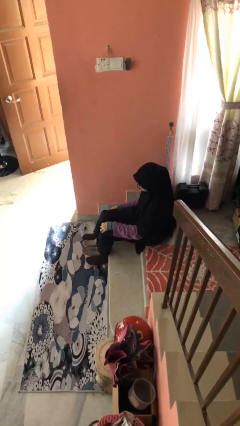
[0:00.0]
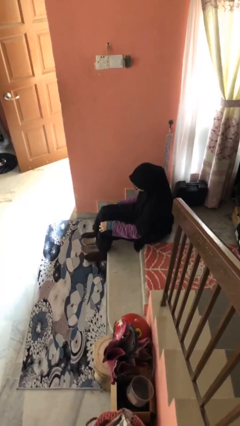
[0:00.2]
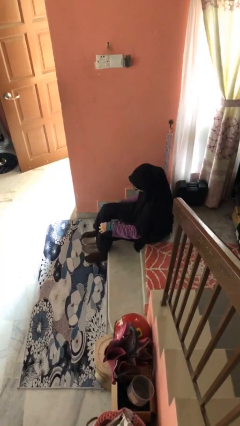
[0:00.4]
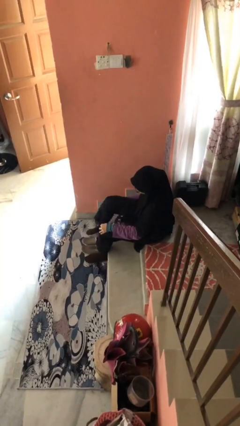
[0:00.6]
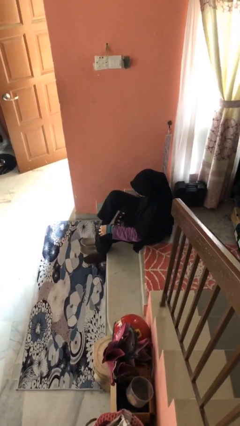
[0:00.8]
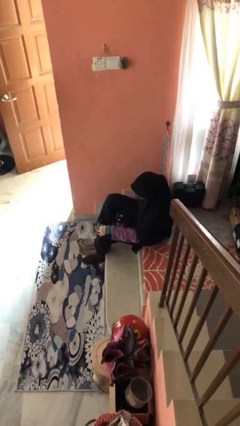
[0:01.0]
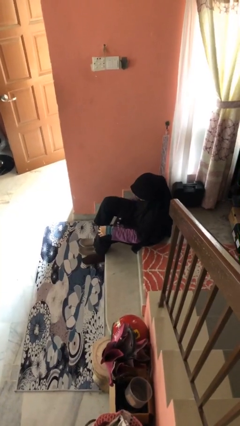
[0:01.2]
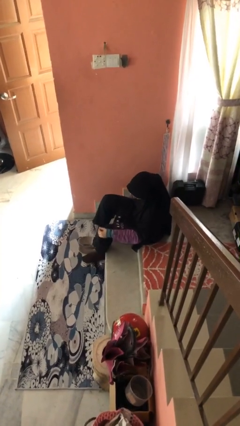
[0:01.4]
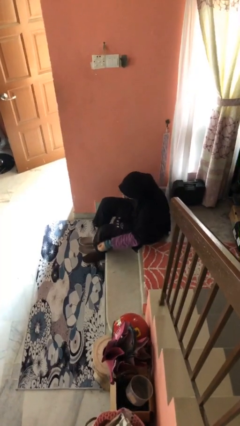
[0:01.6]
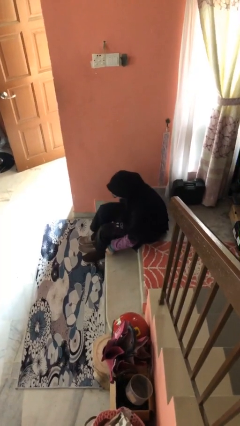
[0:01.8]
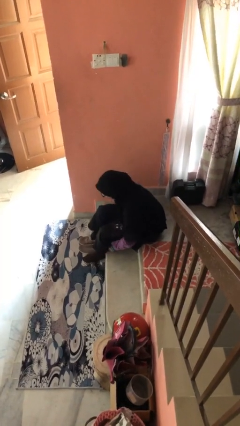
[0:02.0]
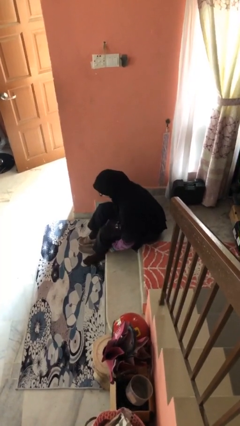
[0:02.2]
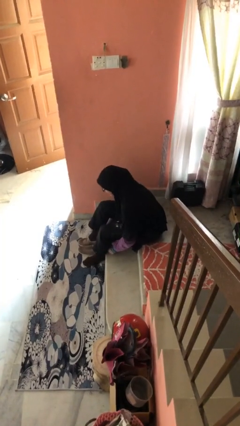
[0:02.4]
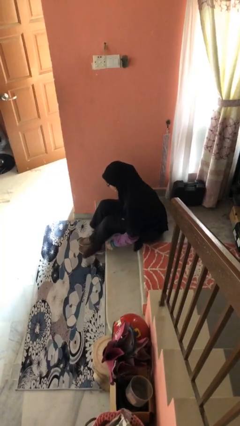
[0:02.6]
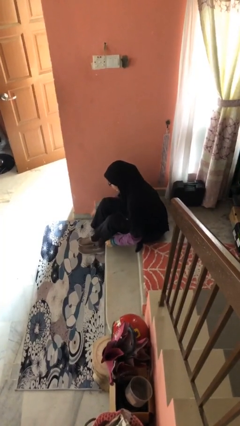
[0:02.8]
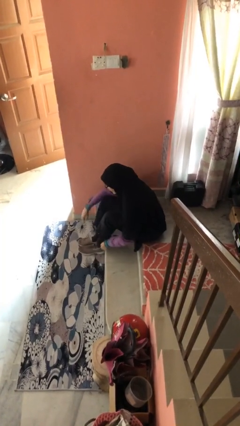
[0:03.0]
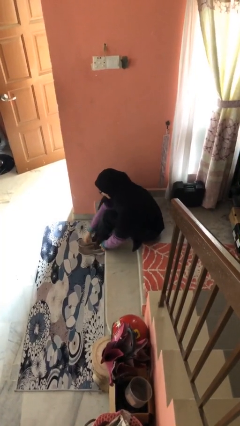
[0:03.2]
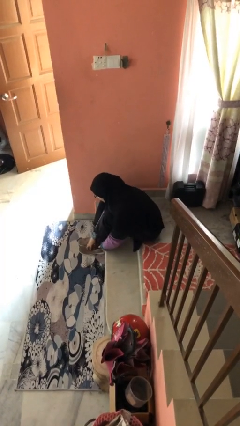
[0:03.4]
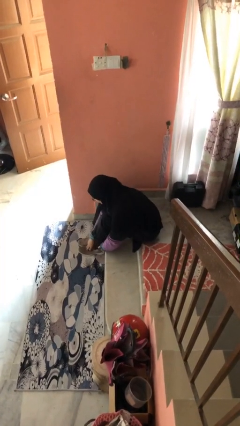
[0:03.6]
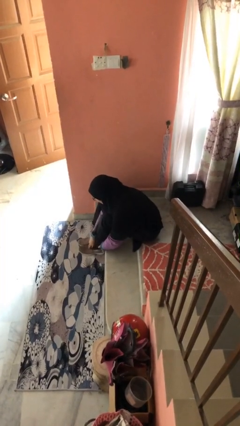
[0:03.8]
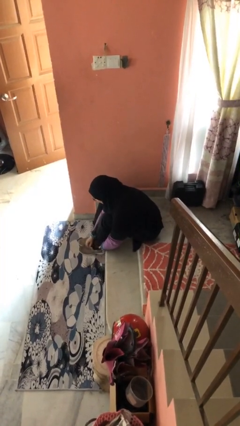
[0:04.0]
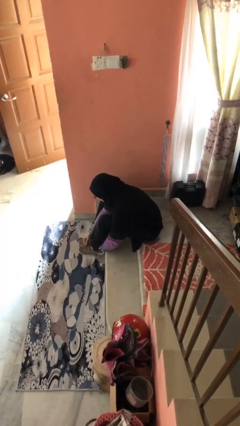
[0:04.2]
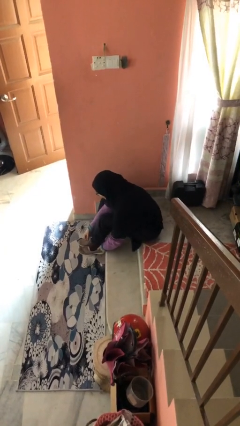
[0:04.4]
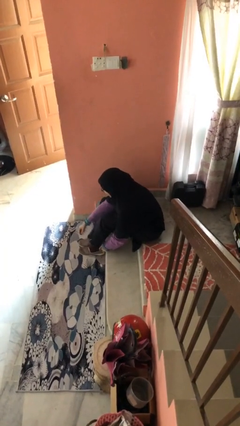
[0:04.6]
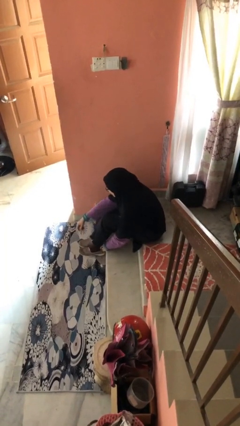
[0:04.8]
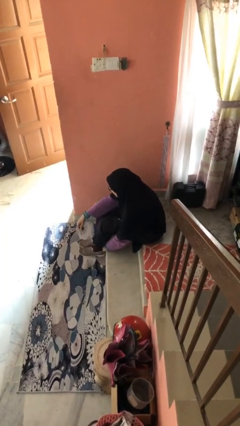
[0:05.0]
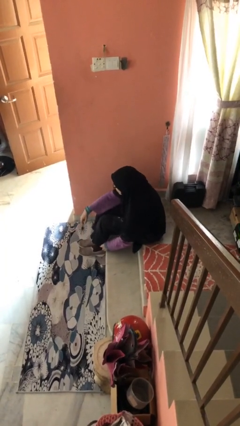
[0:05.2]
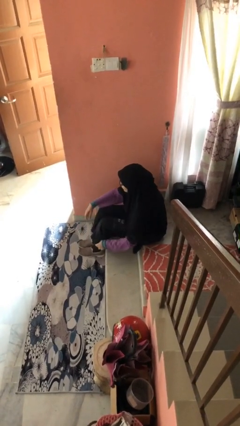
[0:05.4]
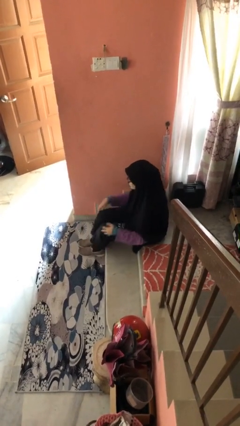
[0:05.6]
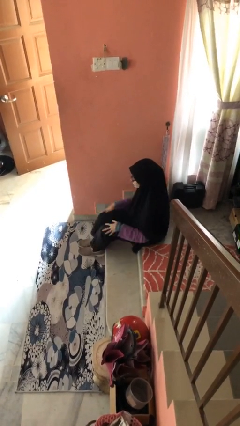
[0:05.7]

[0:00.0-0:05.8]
person puts on shoes

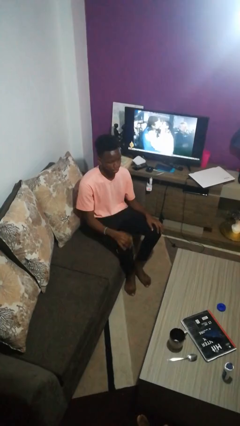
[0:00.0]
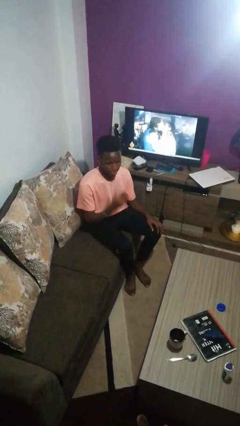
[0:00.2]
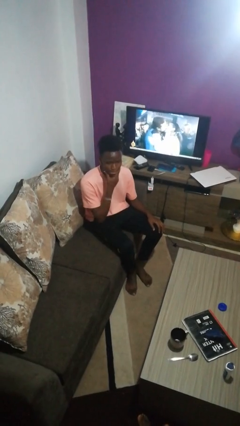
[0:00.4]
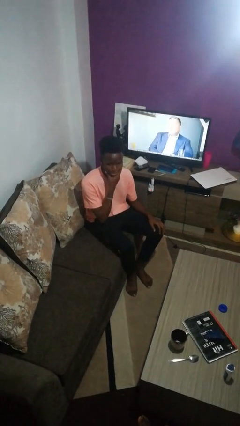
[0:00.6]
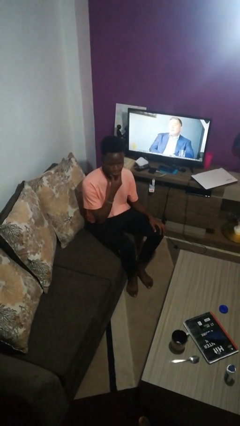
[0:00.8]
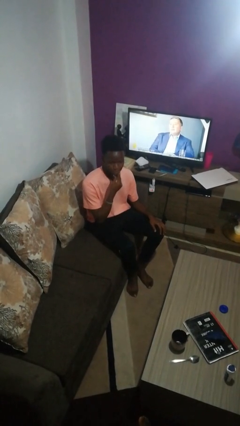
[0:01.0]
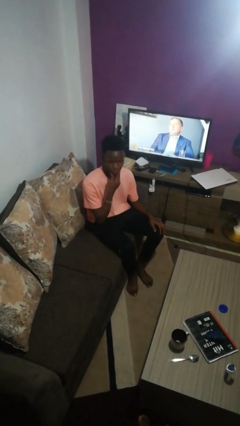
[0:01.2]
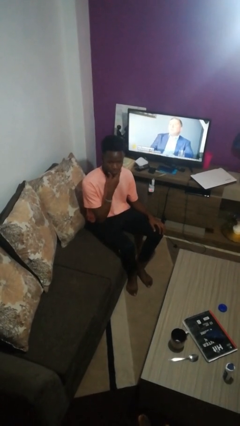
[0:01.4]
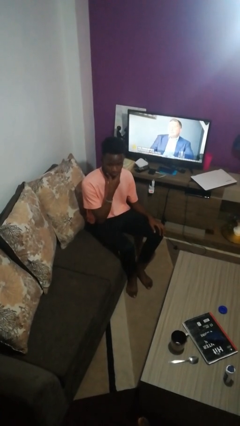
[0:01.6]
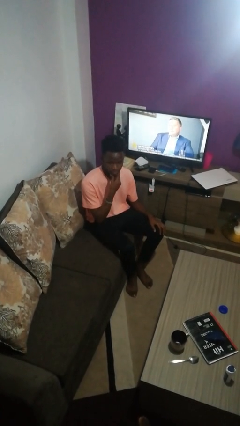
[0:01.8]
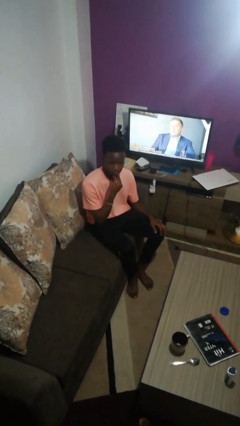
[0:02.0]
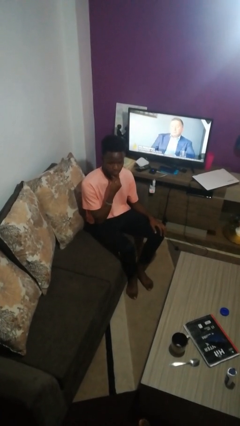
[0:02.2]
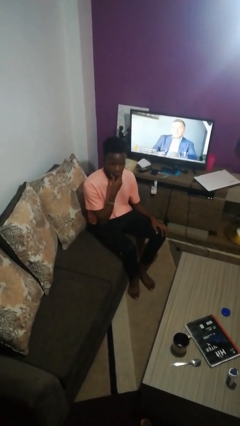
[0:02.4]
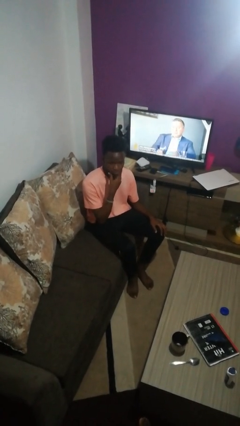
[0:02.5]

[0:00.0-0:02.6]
person strokes chin

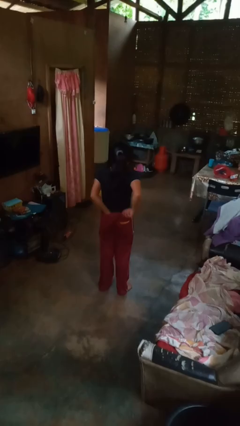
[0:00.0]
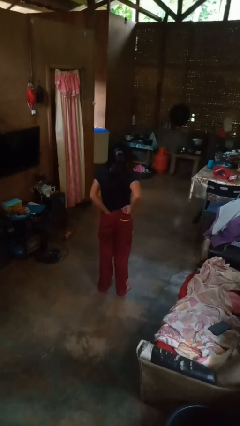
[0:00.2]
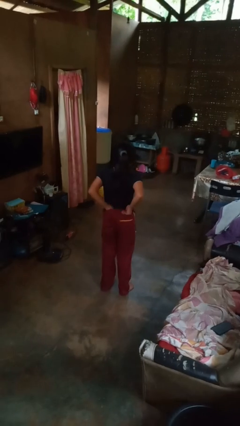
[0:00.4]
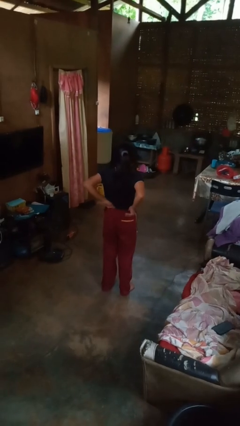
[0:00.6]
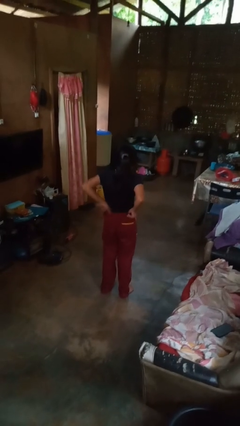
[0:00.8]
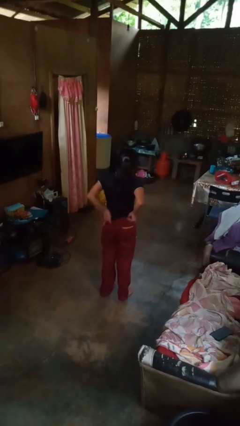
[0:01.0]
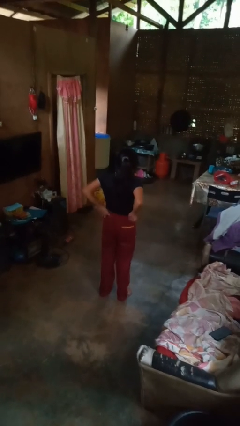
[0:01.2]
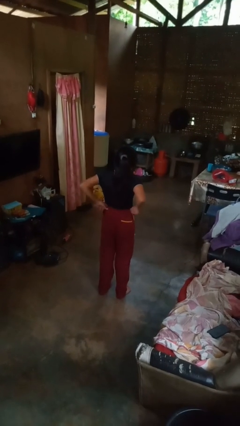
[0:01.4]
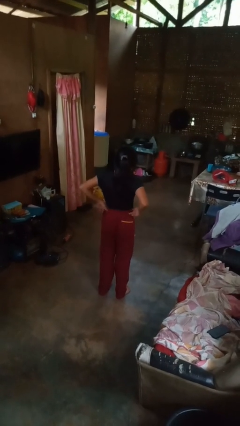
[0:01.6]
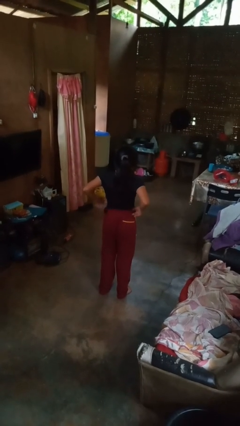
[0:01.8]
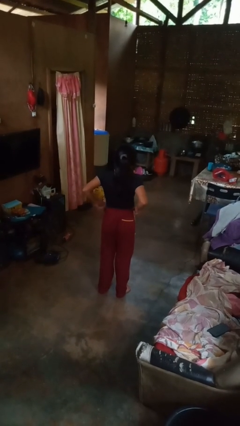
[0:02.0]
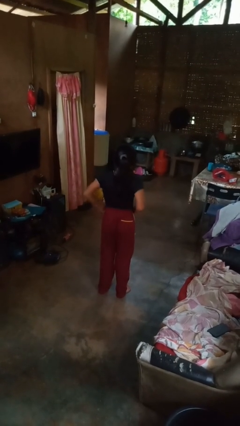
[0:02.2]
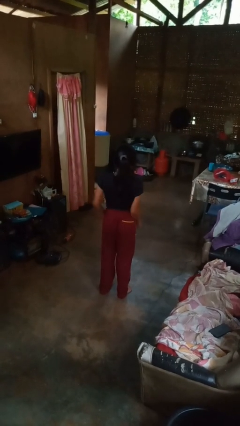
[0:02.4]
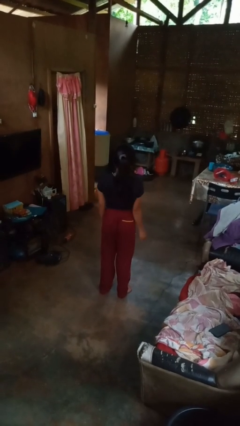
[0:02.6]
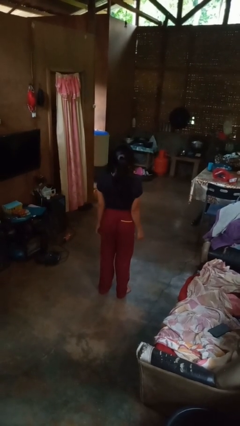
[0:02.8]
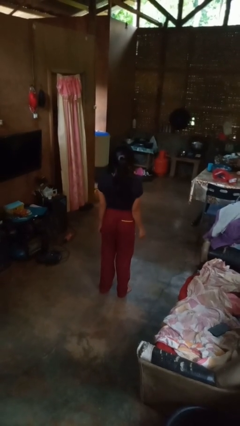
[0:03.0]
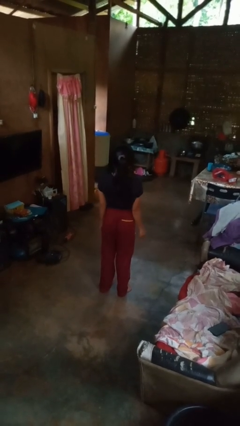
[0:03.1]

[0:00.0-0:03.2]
person tucks in shirt

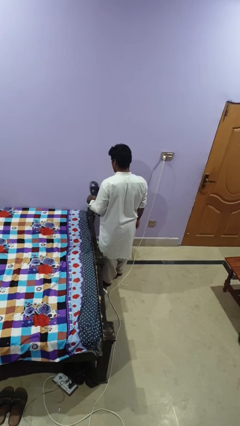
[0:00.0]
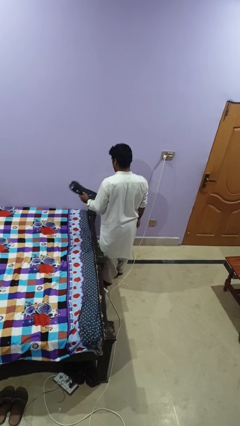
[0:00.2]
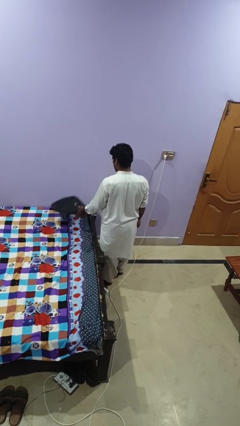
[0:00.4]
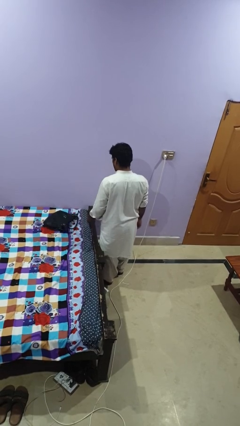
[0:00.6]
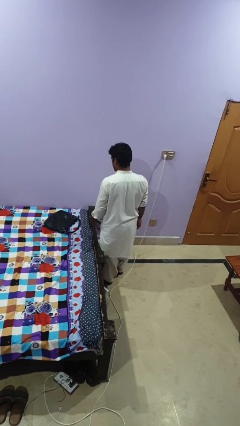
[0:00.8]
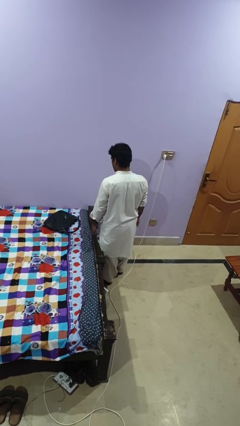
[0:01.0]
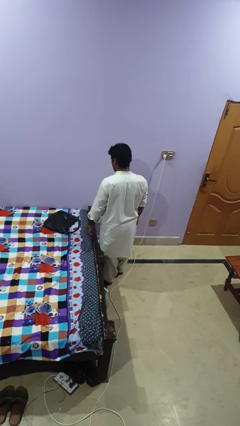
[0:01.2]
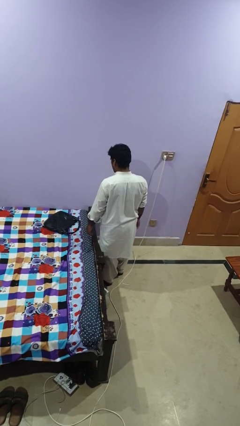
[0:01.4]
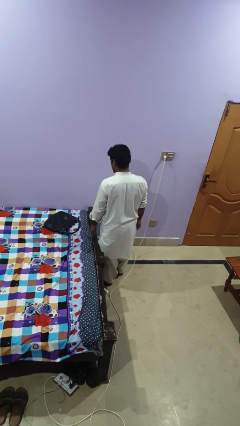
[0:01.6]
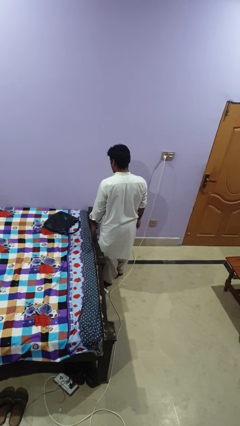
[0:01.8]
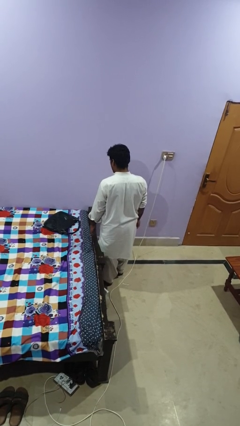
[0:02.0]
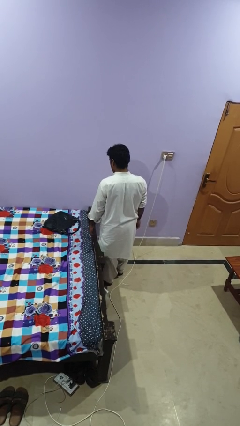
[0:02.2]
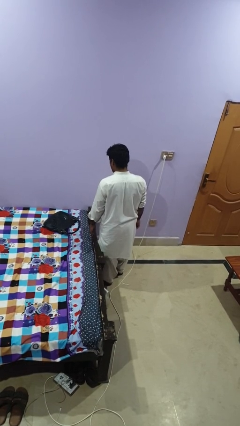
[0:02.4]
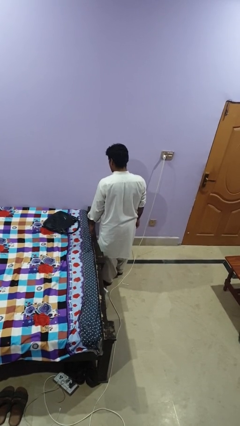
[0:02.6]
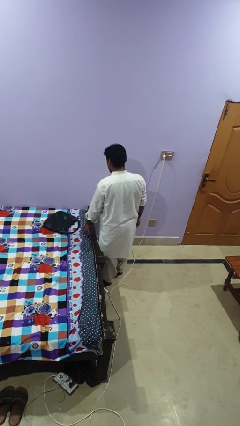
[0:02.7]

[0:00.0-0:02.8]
person throws object on bed

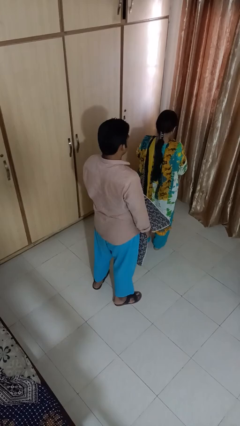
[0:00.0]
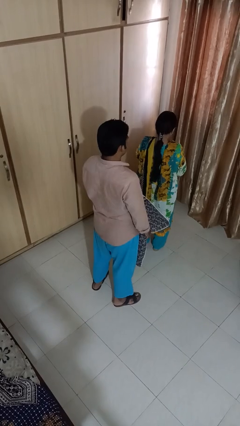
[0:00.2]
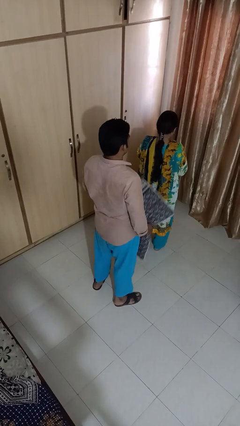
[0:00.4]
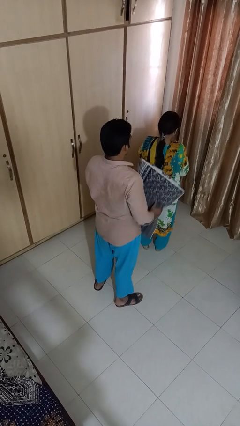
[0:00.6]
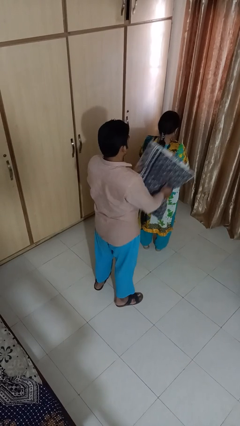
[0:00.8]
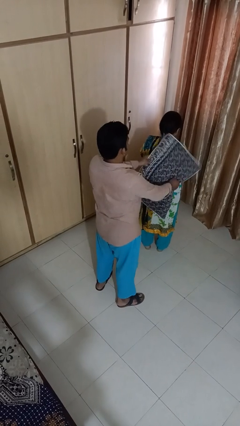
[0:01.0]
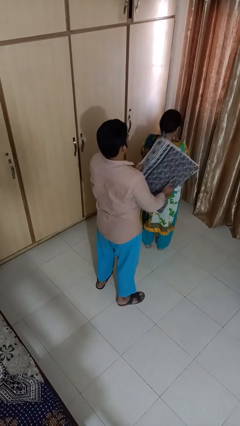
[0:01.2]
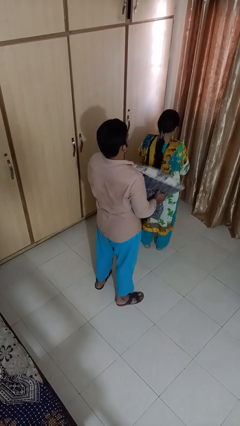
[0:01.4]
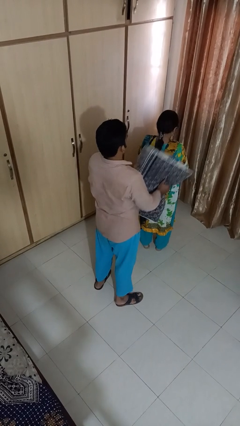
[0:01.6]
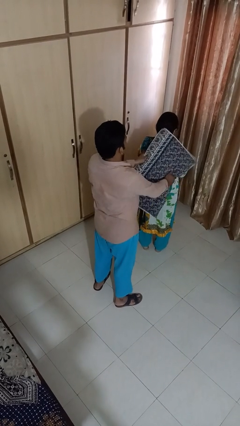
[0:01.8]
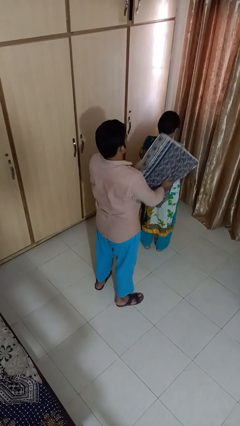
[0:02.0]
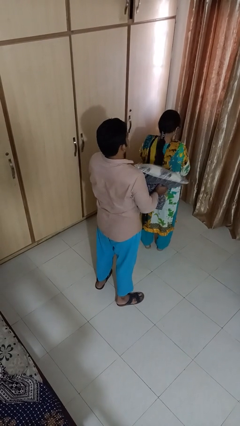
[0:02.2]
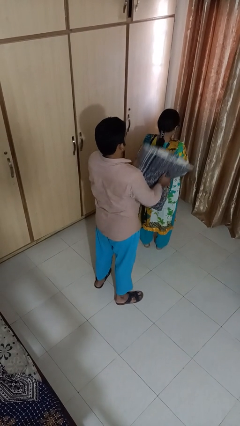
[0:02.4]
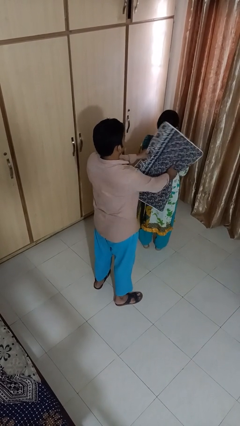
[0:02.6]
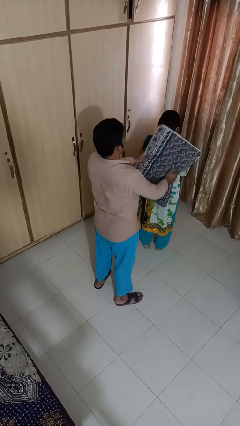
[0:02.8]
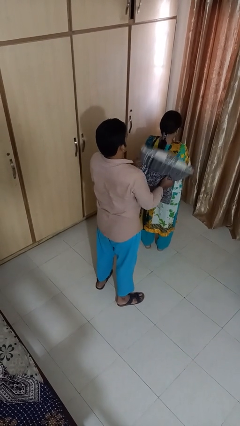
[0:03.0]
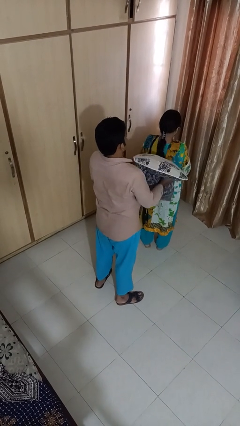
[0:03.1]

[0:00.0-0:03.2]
person hits person with pillow
